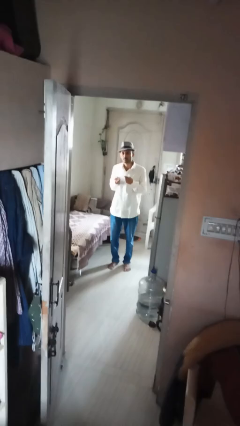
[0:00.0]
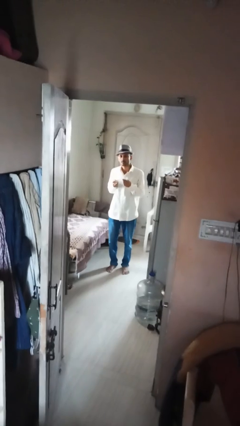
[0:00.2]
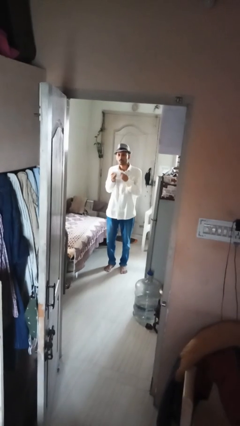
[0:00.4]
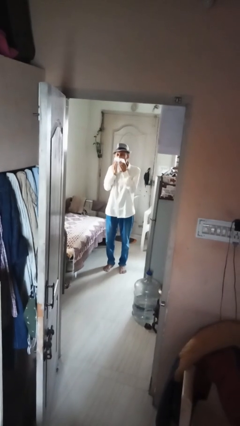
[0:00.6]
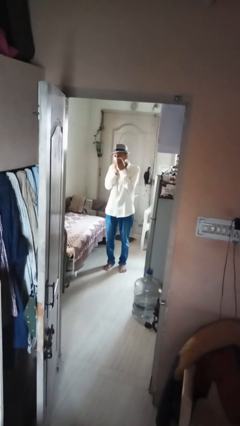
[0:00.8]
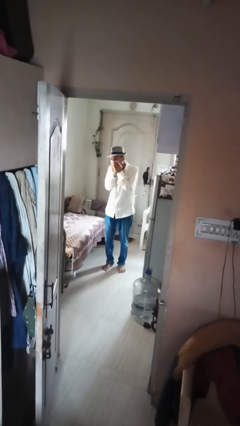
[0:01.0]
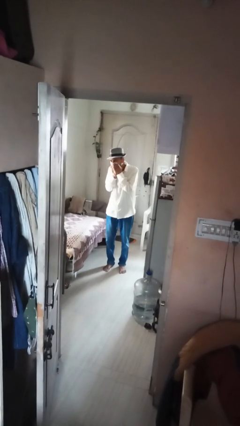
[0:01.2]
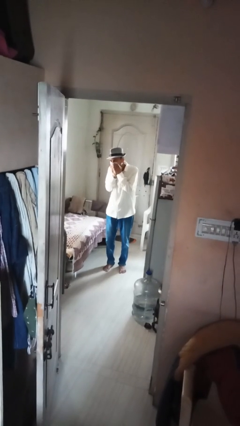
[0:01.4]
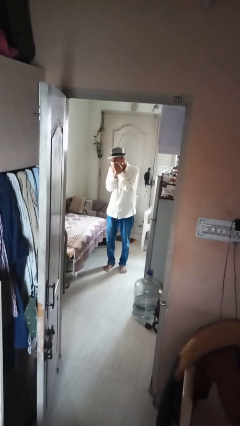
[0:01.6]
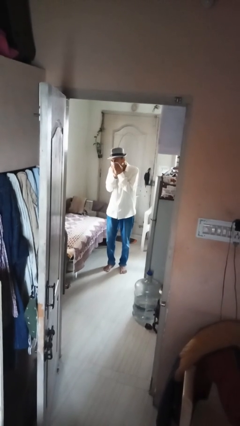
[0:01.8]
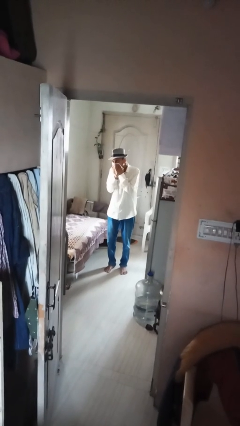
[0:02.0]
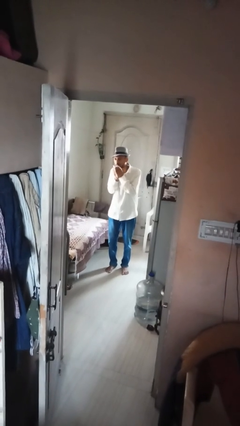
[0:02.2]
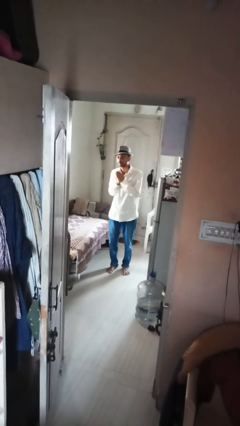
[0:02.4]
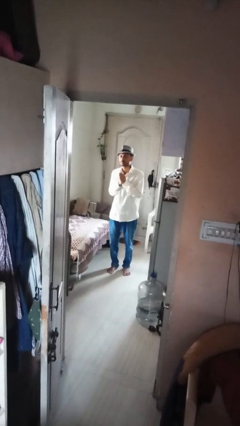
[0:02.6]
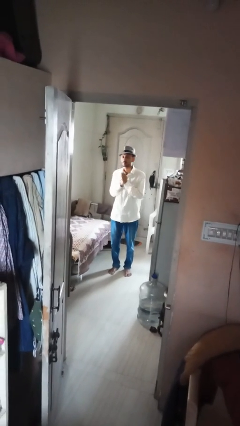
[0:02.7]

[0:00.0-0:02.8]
person blows nose

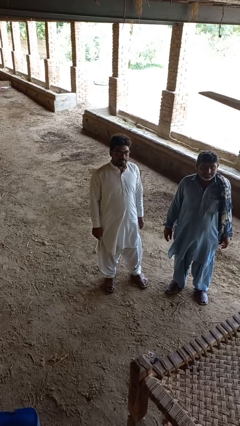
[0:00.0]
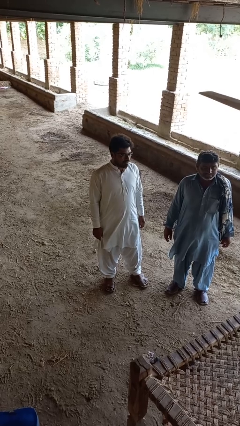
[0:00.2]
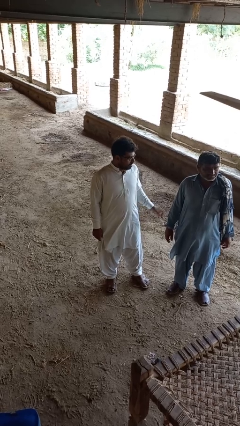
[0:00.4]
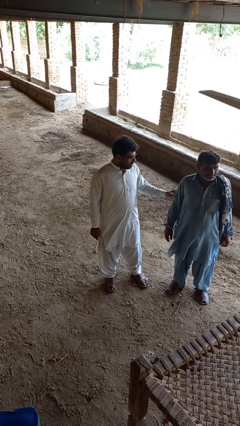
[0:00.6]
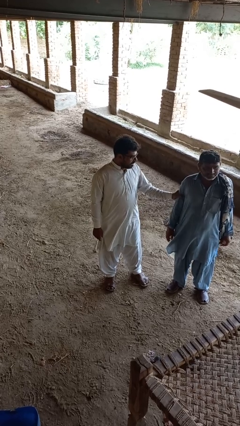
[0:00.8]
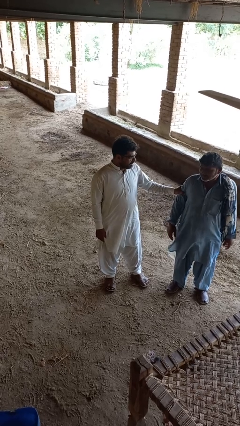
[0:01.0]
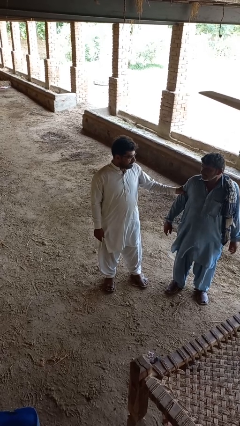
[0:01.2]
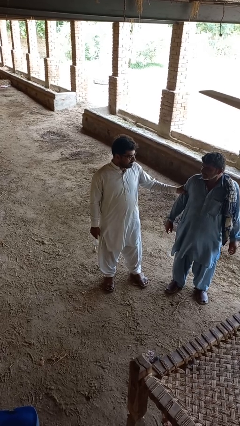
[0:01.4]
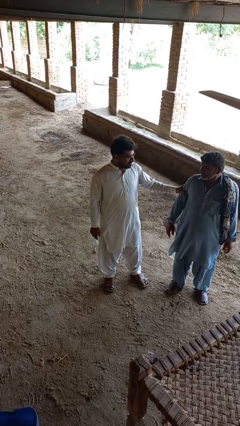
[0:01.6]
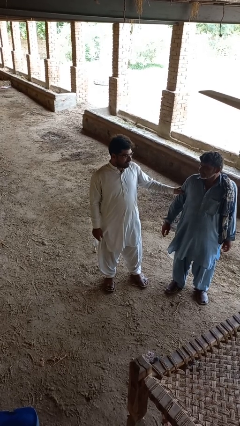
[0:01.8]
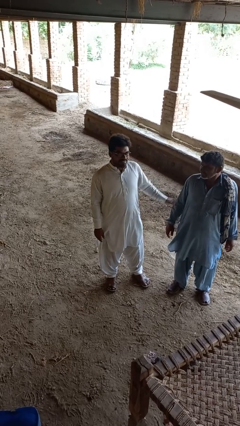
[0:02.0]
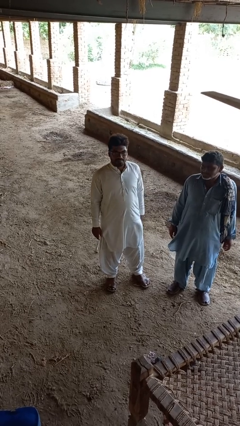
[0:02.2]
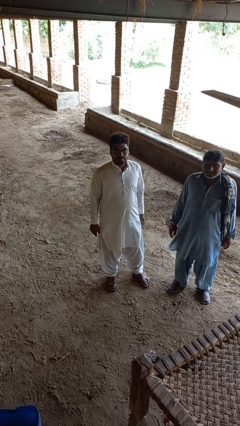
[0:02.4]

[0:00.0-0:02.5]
person grabs person by bicep

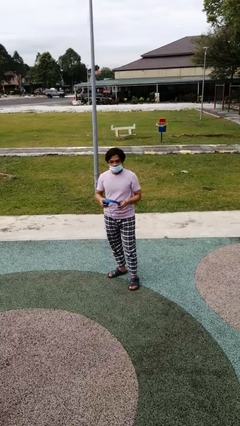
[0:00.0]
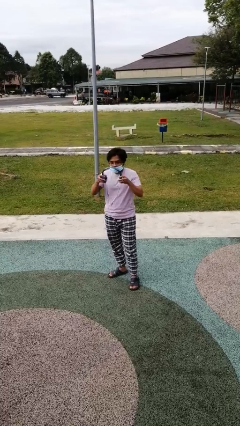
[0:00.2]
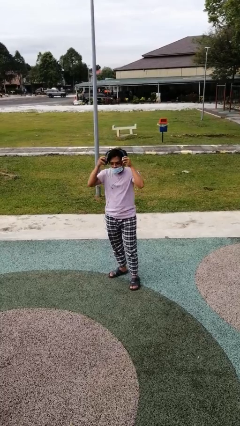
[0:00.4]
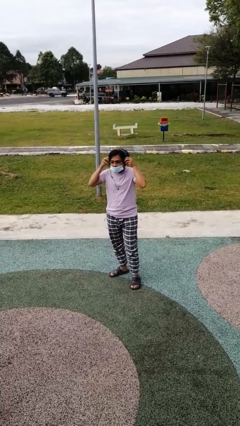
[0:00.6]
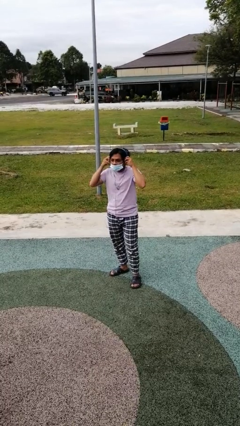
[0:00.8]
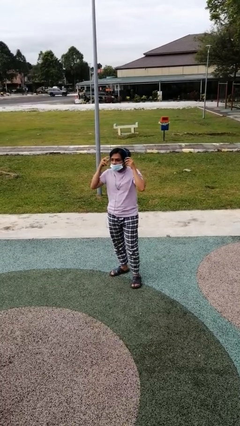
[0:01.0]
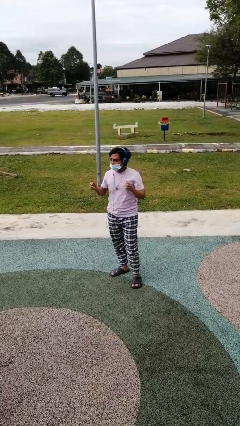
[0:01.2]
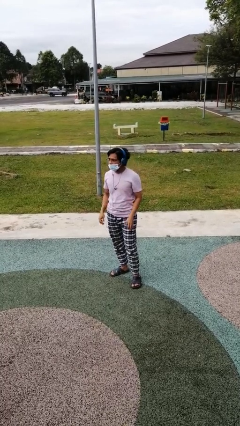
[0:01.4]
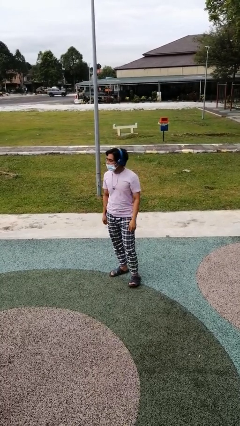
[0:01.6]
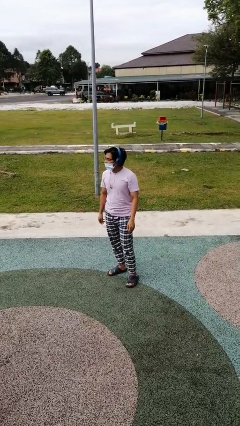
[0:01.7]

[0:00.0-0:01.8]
person puts on headphones

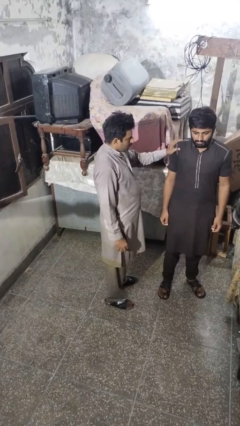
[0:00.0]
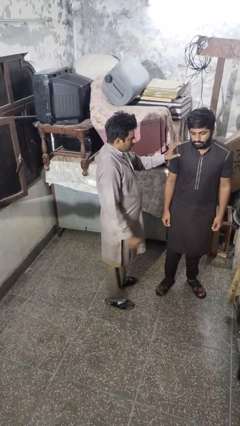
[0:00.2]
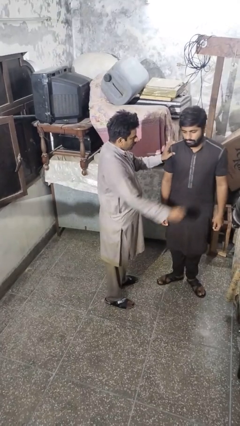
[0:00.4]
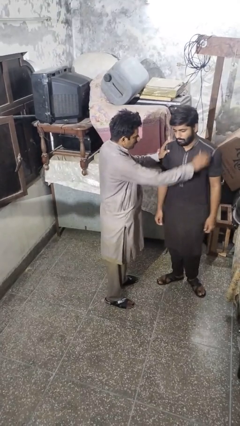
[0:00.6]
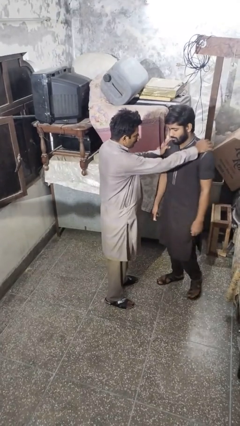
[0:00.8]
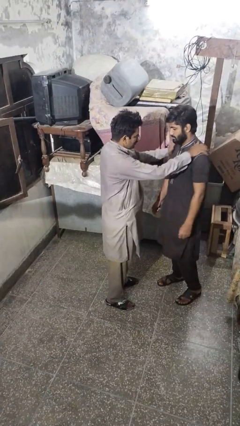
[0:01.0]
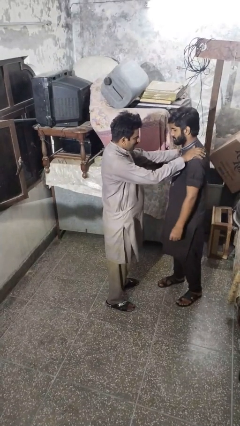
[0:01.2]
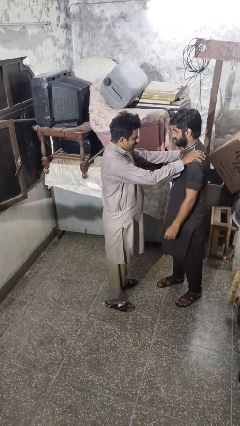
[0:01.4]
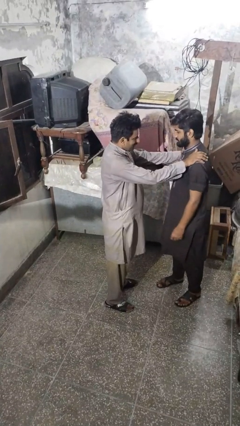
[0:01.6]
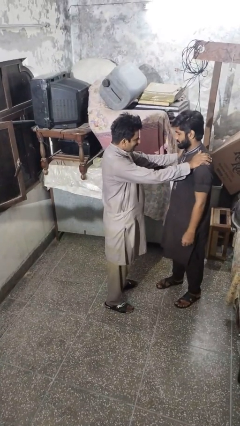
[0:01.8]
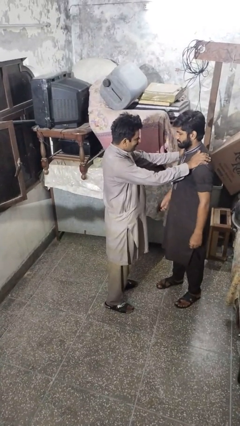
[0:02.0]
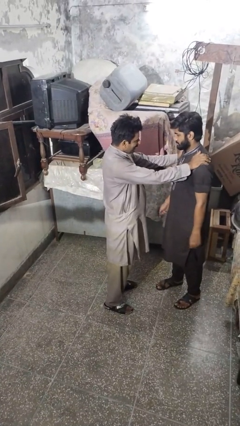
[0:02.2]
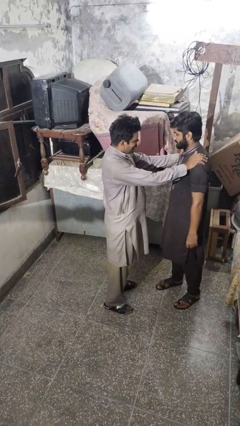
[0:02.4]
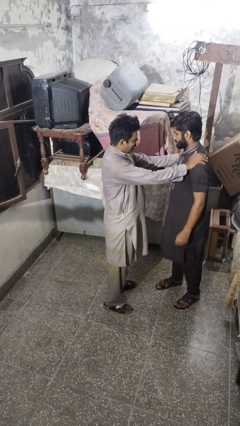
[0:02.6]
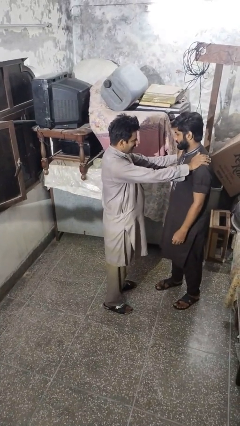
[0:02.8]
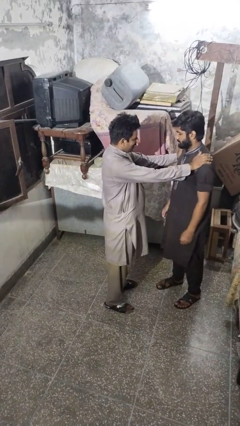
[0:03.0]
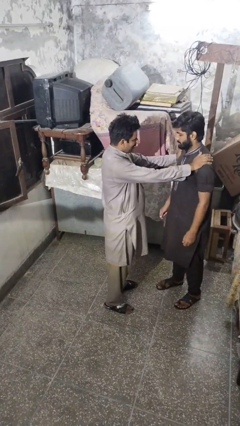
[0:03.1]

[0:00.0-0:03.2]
person spins person around

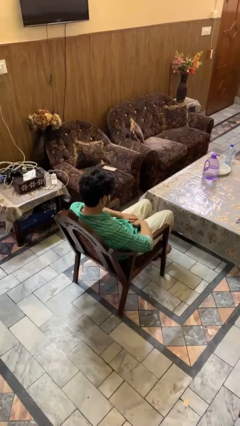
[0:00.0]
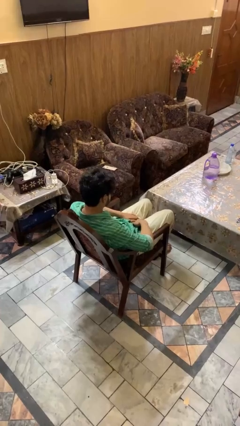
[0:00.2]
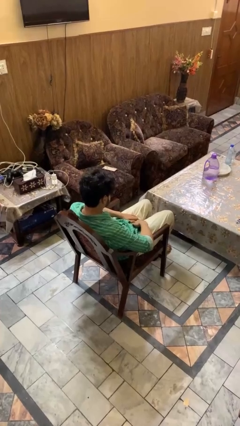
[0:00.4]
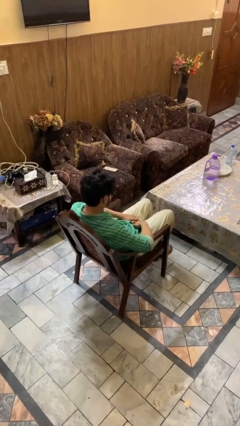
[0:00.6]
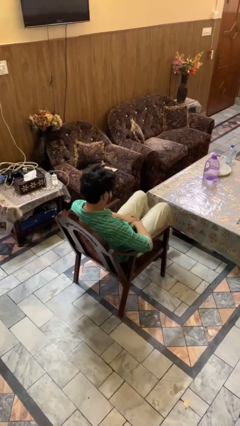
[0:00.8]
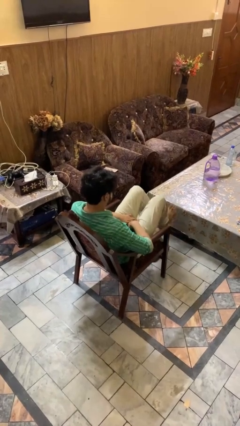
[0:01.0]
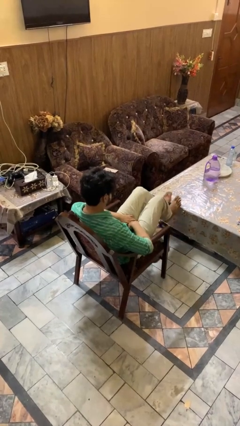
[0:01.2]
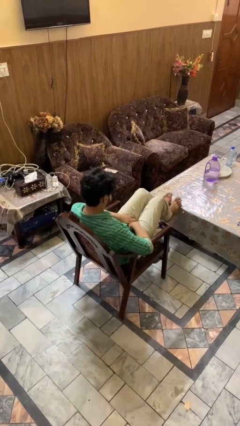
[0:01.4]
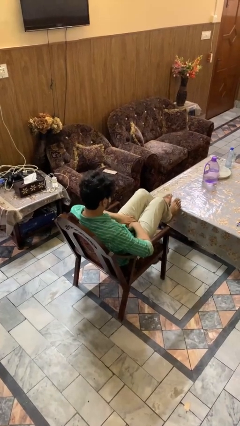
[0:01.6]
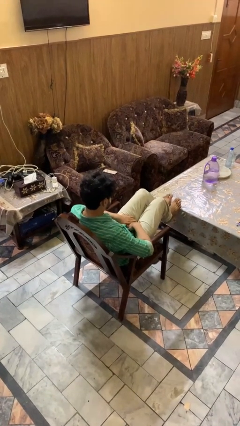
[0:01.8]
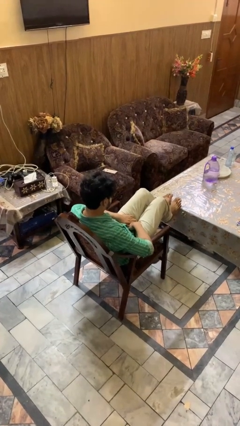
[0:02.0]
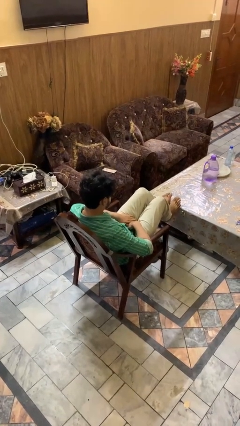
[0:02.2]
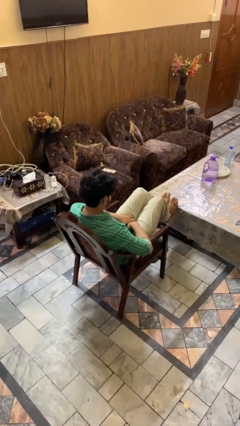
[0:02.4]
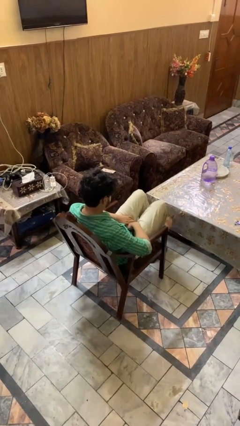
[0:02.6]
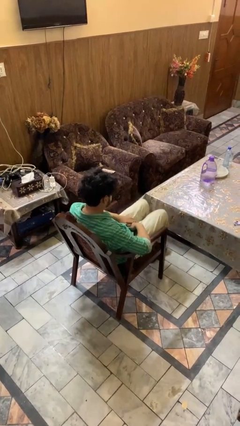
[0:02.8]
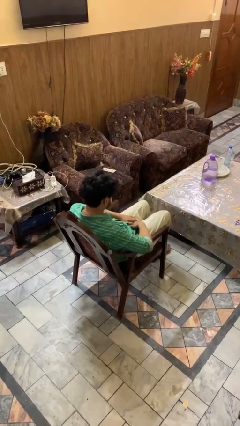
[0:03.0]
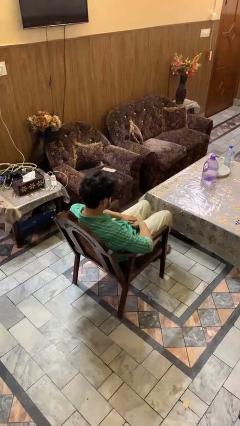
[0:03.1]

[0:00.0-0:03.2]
person puts feet up

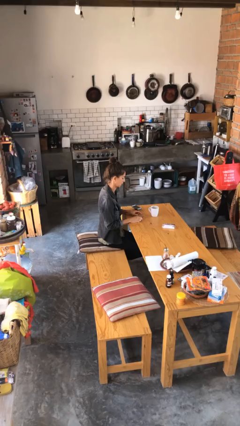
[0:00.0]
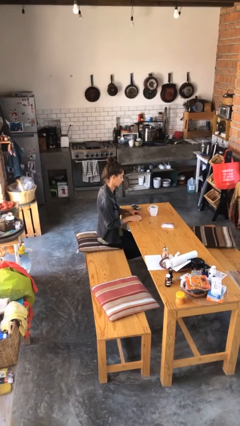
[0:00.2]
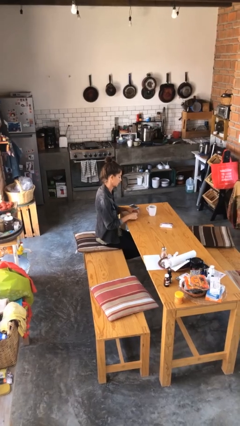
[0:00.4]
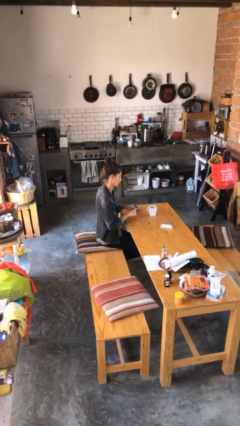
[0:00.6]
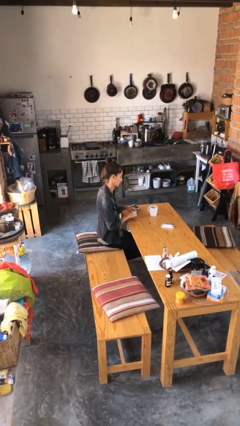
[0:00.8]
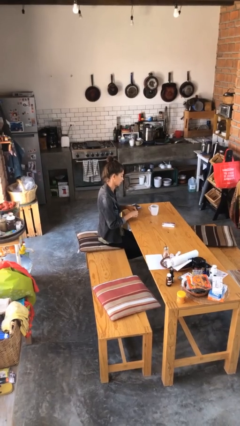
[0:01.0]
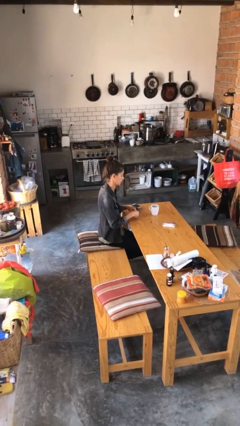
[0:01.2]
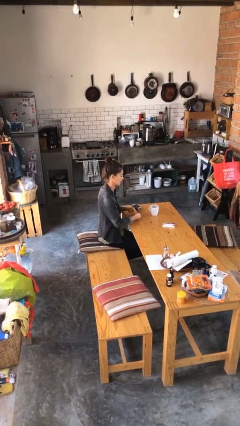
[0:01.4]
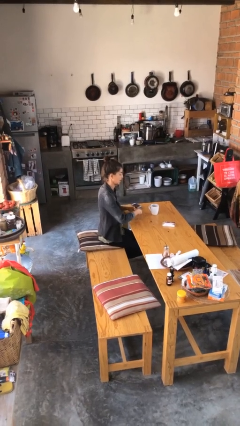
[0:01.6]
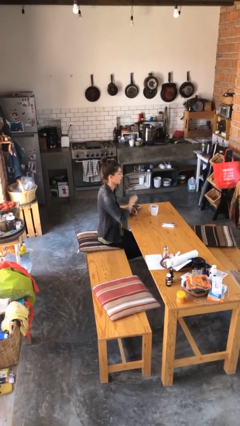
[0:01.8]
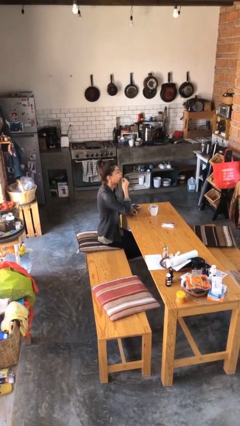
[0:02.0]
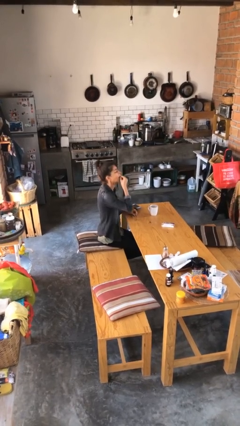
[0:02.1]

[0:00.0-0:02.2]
person takes medicine pills

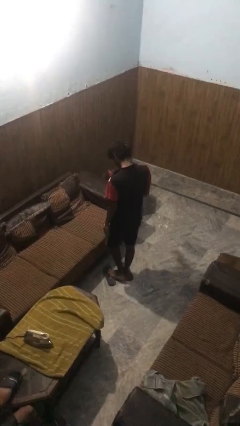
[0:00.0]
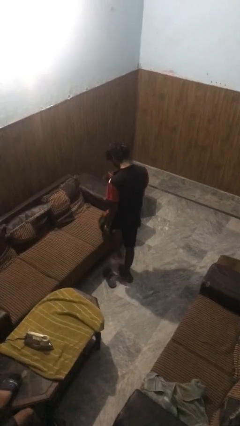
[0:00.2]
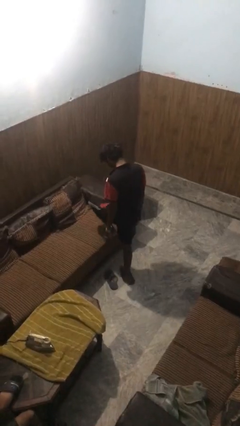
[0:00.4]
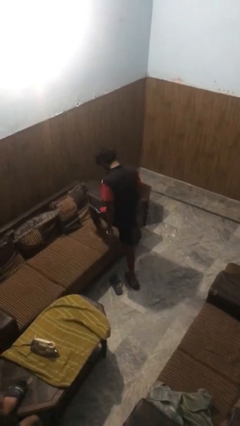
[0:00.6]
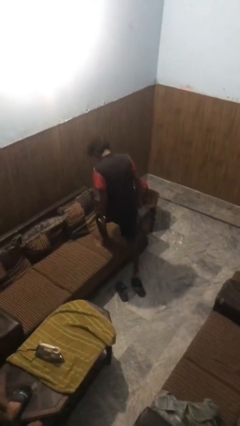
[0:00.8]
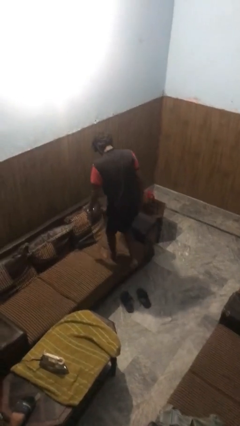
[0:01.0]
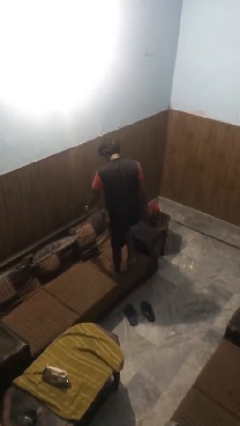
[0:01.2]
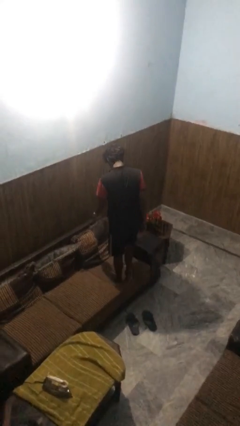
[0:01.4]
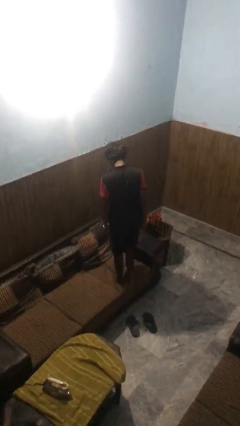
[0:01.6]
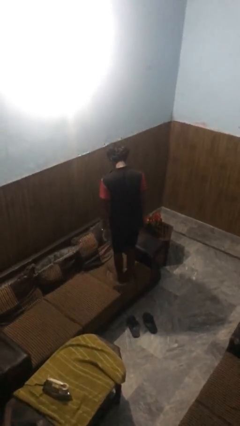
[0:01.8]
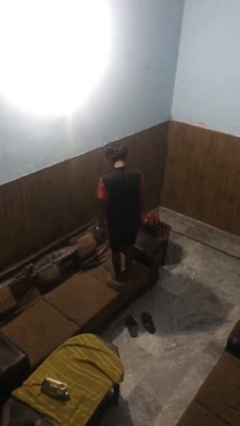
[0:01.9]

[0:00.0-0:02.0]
person climbs on couch
